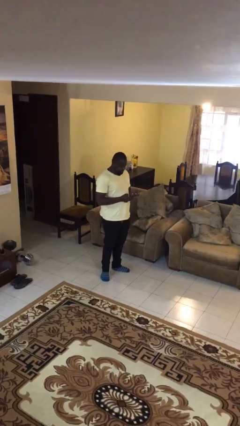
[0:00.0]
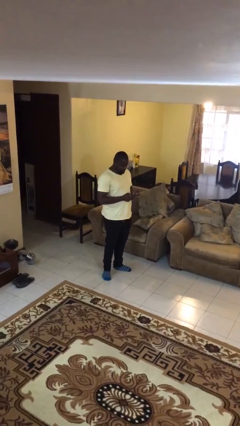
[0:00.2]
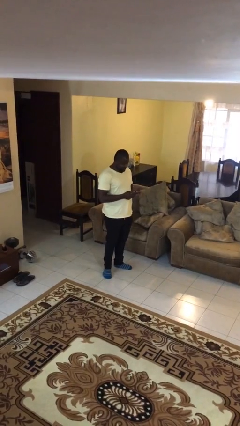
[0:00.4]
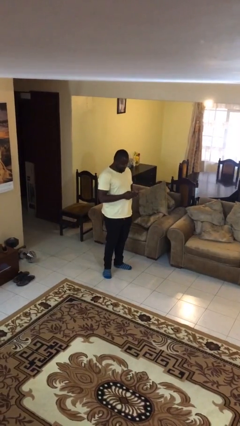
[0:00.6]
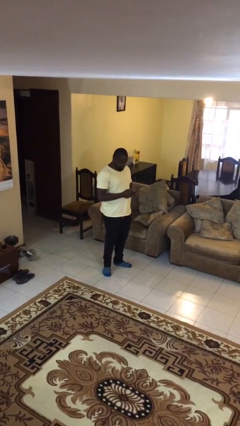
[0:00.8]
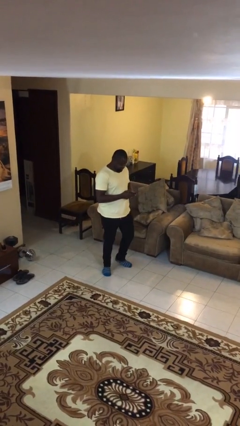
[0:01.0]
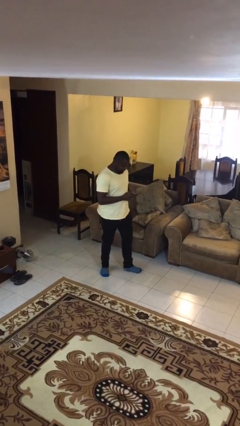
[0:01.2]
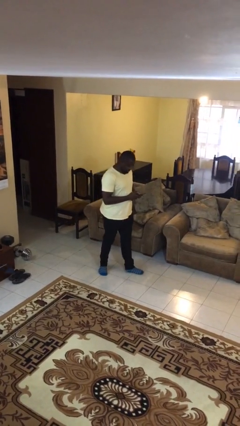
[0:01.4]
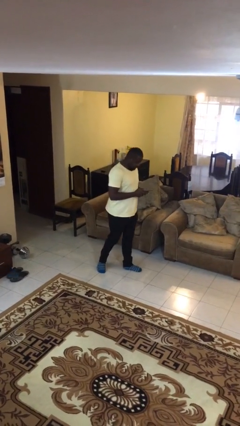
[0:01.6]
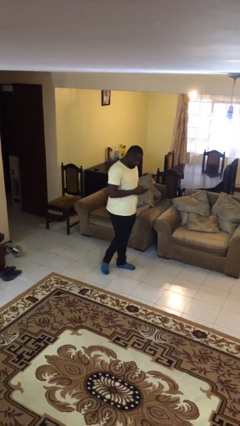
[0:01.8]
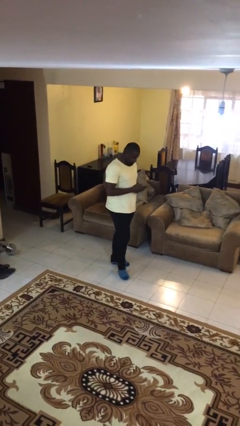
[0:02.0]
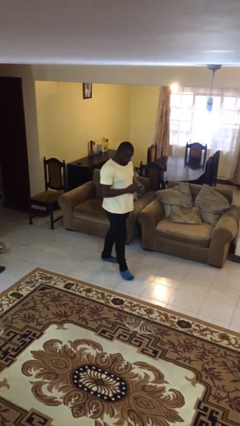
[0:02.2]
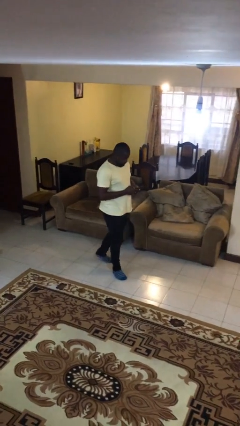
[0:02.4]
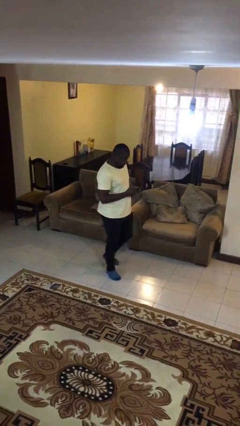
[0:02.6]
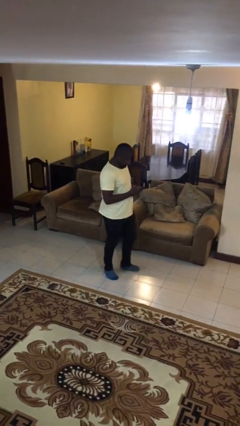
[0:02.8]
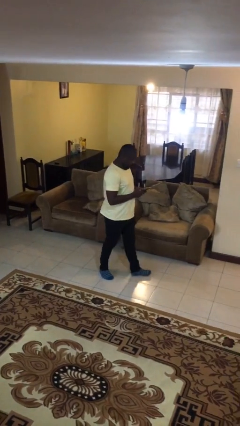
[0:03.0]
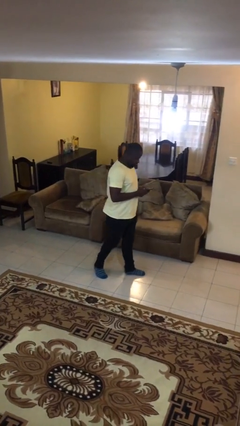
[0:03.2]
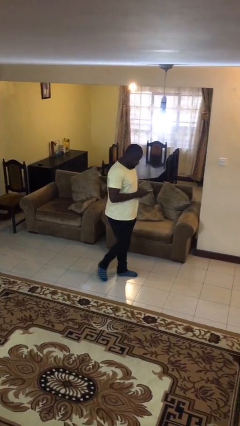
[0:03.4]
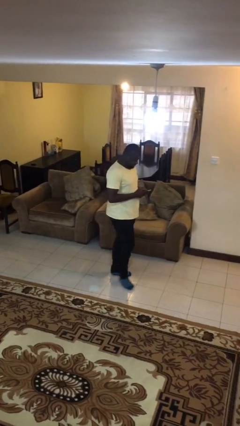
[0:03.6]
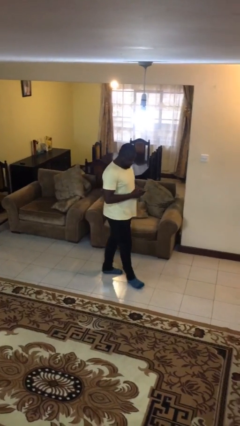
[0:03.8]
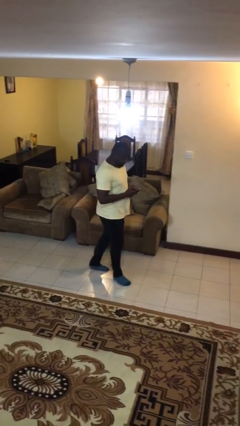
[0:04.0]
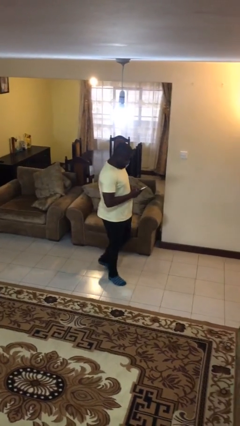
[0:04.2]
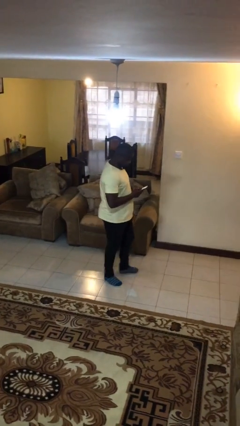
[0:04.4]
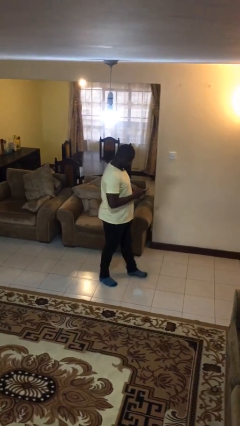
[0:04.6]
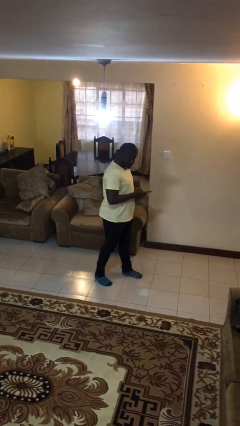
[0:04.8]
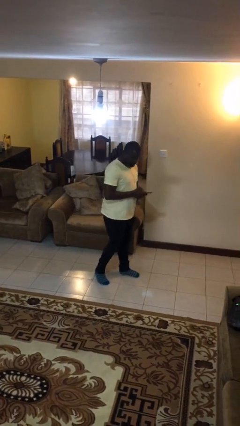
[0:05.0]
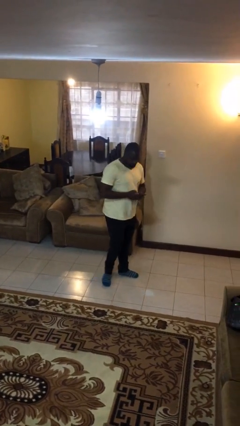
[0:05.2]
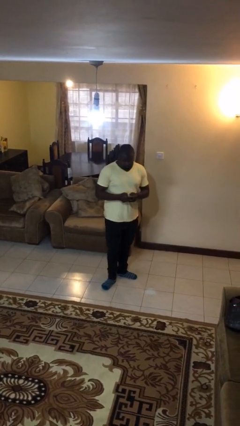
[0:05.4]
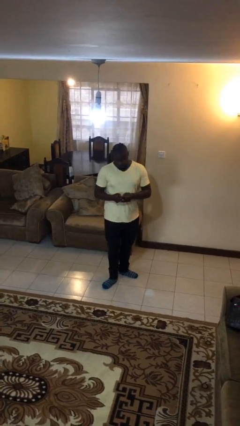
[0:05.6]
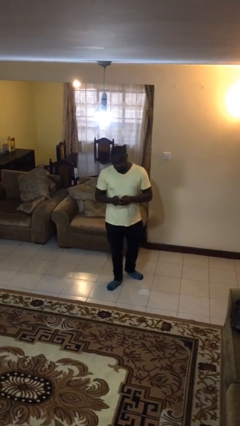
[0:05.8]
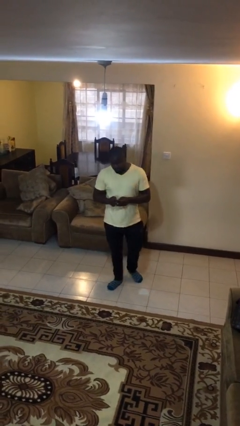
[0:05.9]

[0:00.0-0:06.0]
person texts on phone

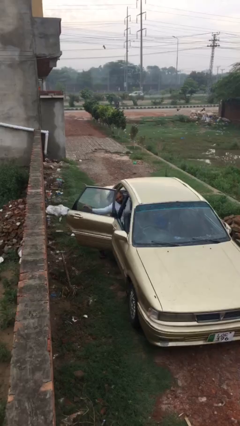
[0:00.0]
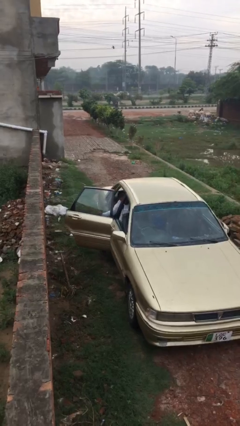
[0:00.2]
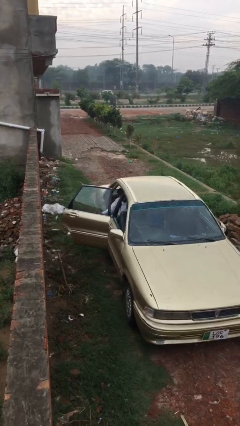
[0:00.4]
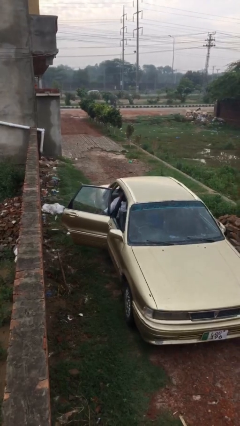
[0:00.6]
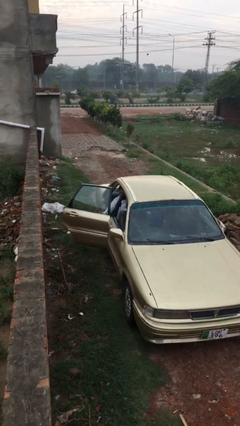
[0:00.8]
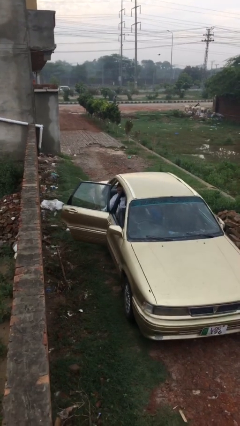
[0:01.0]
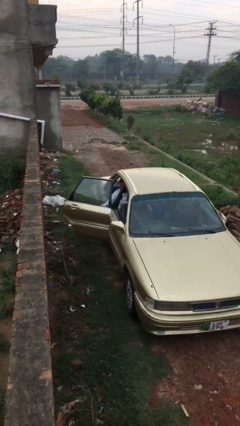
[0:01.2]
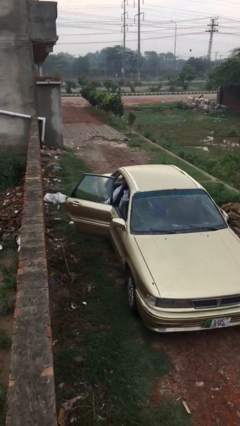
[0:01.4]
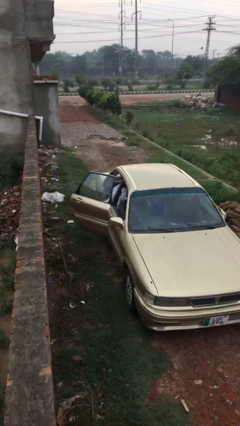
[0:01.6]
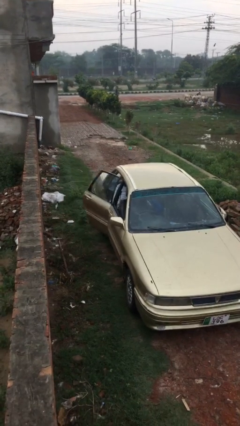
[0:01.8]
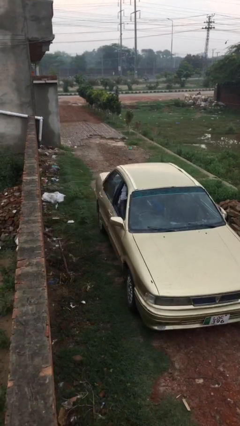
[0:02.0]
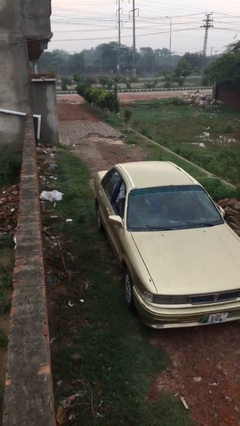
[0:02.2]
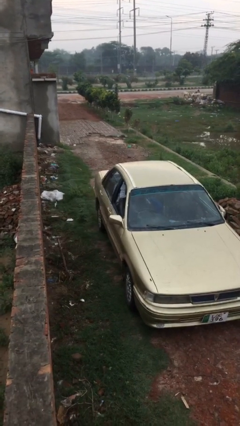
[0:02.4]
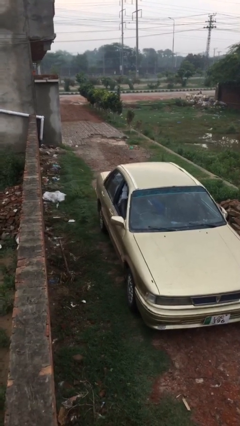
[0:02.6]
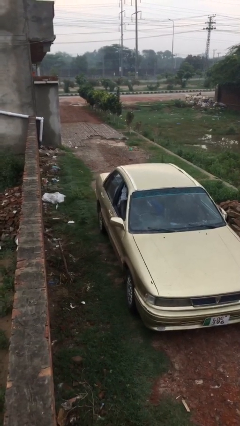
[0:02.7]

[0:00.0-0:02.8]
person closes car door

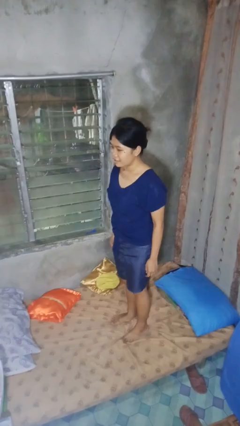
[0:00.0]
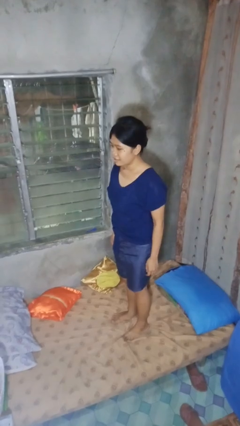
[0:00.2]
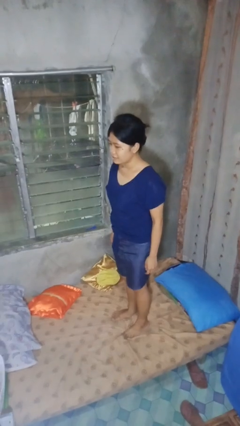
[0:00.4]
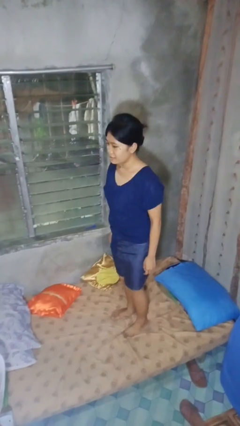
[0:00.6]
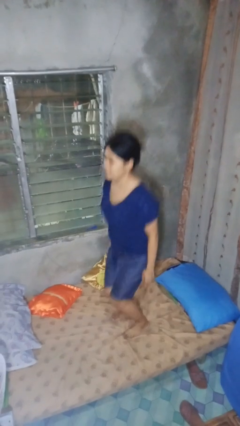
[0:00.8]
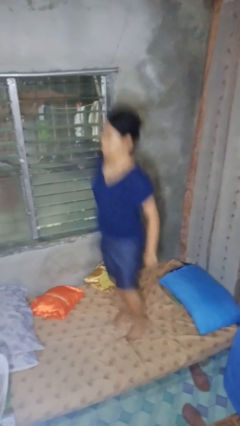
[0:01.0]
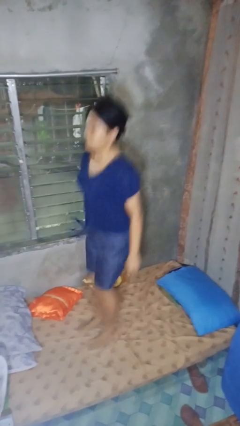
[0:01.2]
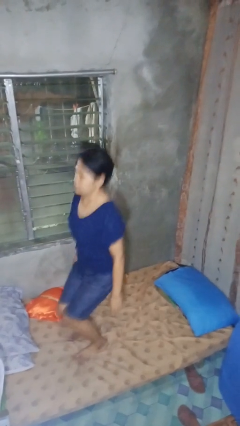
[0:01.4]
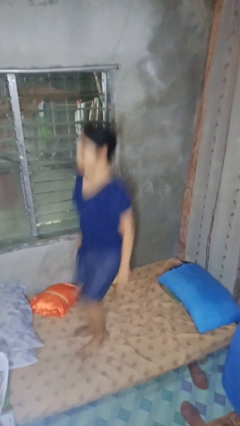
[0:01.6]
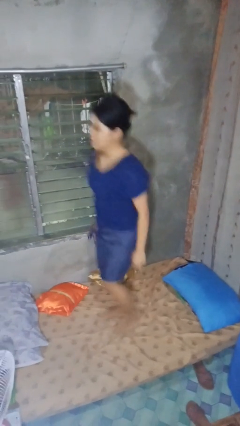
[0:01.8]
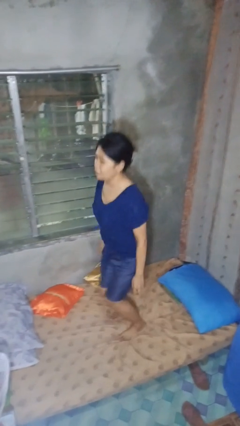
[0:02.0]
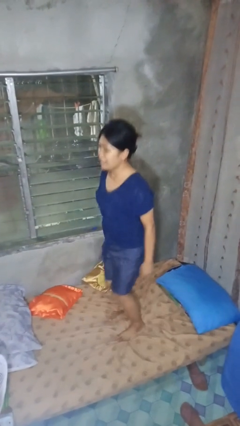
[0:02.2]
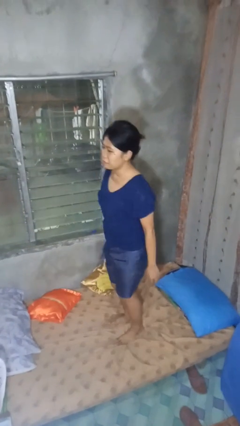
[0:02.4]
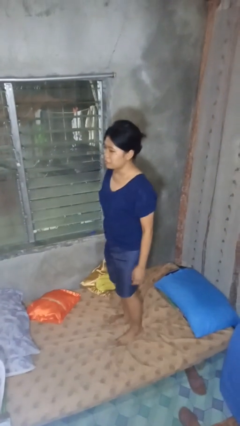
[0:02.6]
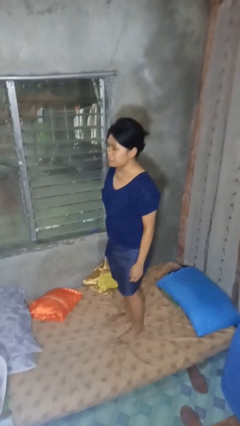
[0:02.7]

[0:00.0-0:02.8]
person jumps on bed

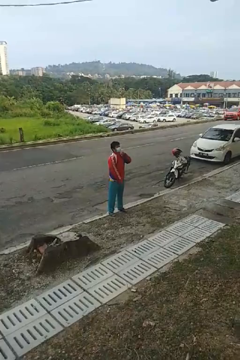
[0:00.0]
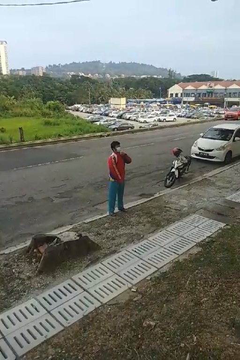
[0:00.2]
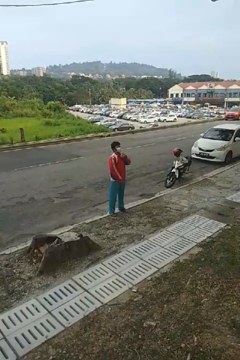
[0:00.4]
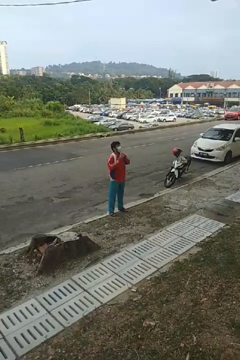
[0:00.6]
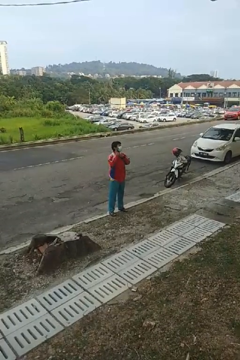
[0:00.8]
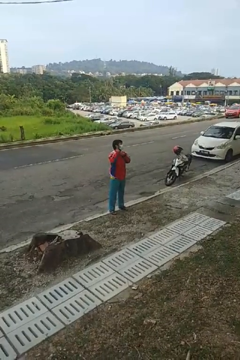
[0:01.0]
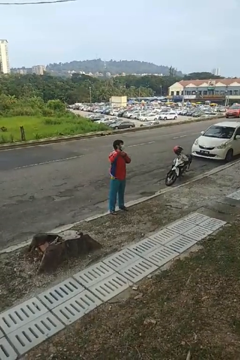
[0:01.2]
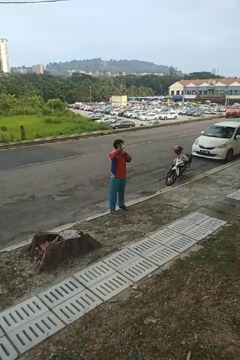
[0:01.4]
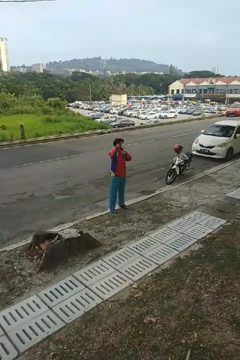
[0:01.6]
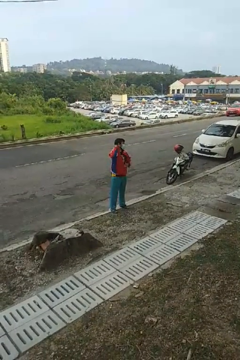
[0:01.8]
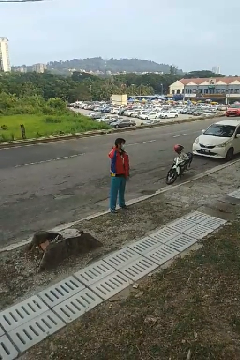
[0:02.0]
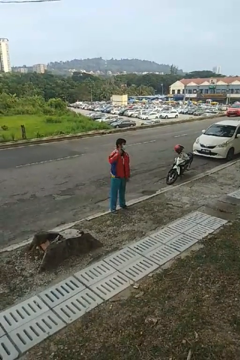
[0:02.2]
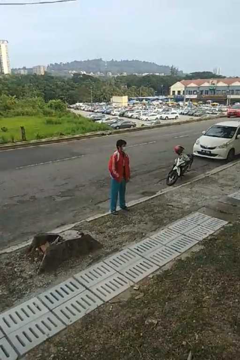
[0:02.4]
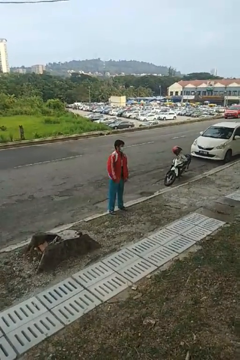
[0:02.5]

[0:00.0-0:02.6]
person unzips jacket

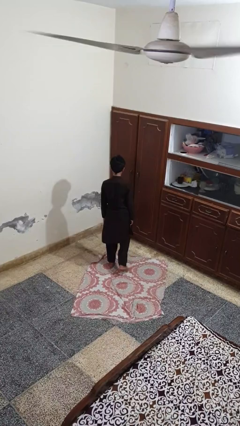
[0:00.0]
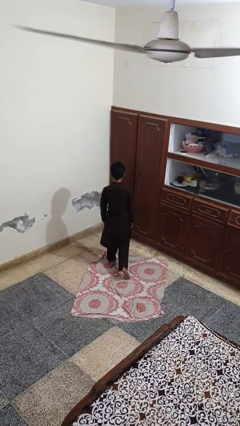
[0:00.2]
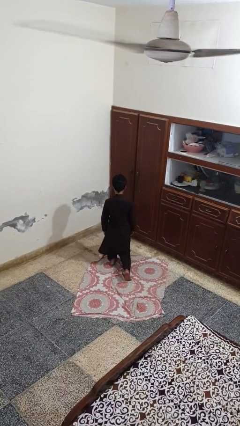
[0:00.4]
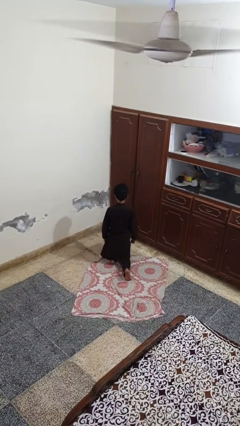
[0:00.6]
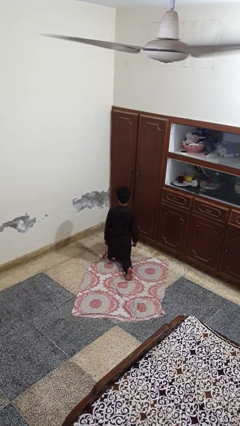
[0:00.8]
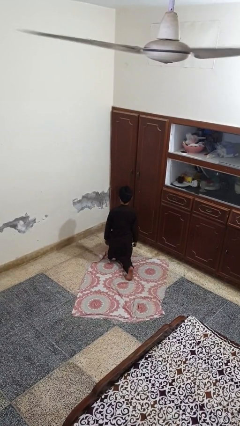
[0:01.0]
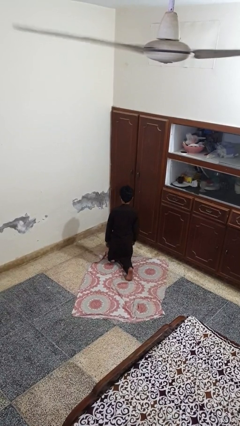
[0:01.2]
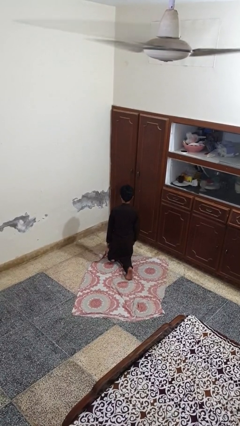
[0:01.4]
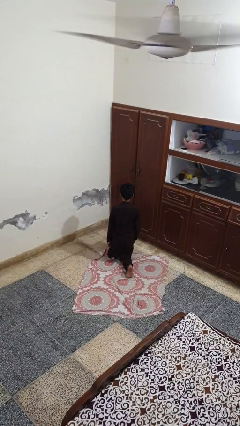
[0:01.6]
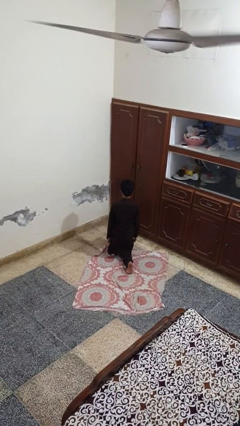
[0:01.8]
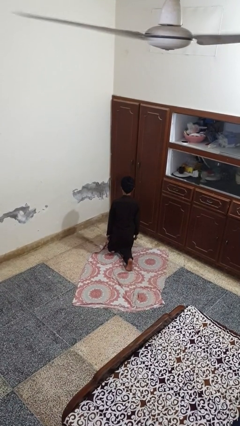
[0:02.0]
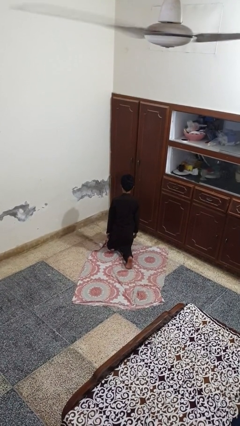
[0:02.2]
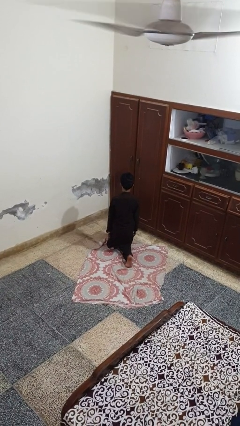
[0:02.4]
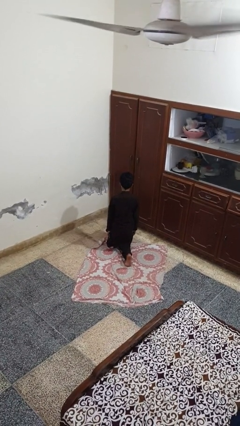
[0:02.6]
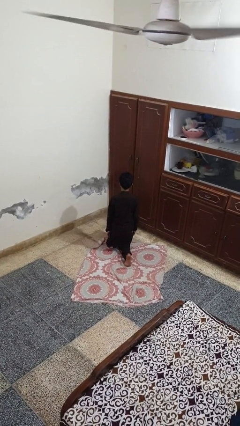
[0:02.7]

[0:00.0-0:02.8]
person kneels

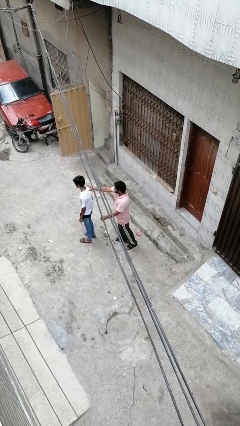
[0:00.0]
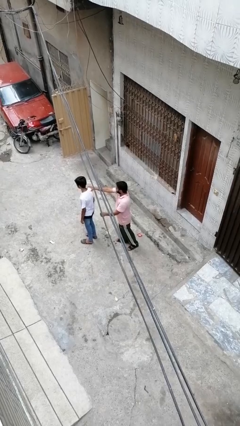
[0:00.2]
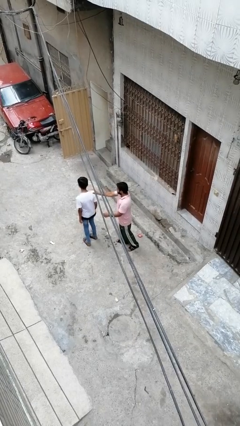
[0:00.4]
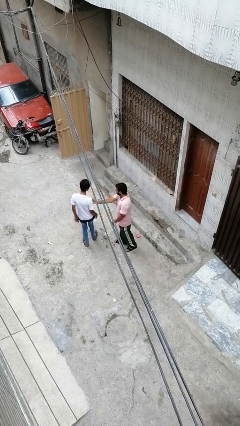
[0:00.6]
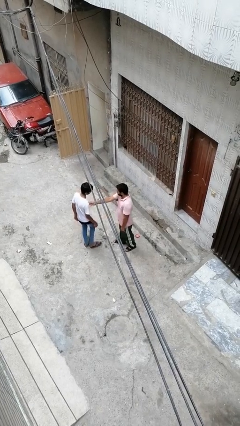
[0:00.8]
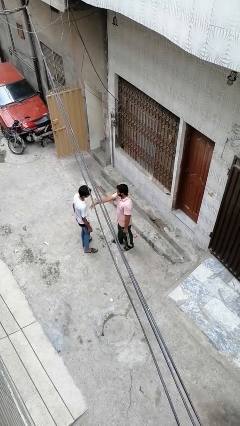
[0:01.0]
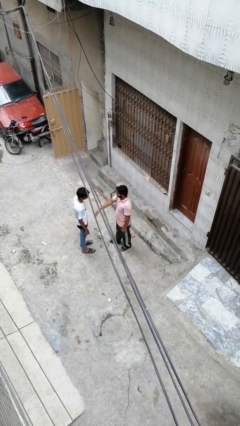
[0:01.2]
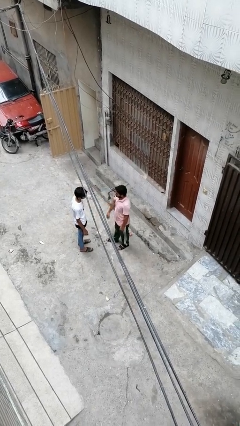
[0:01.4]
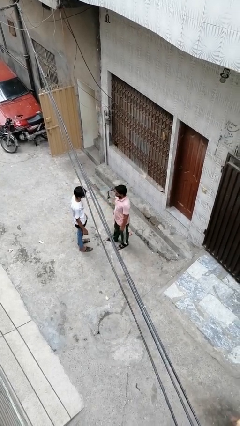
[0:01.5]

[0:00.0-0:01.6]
person spins person around
